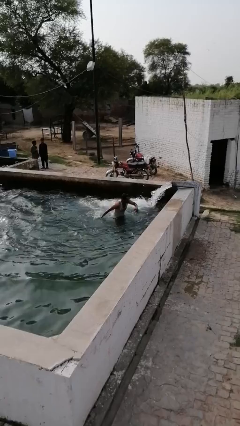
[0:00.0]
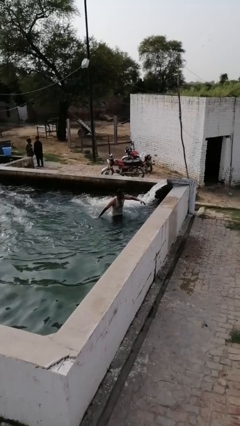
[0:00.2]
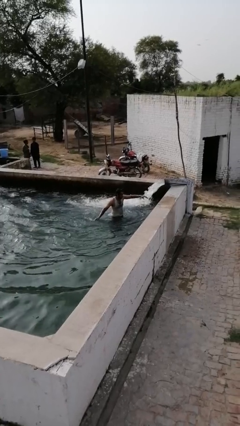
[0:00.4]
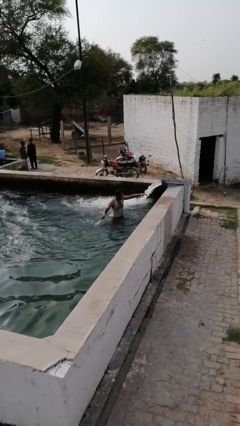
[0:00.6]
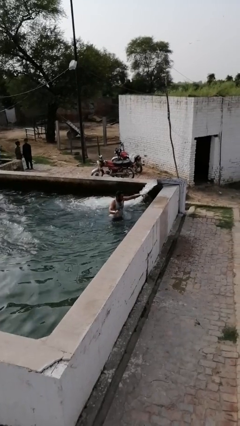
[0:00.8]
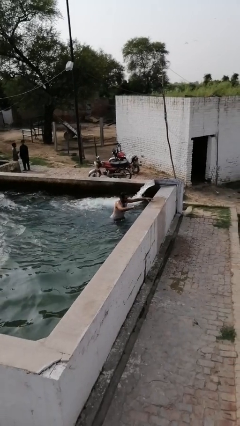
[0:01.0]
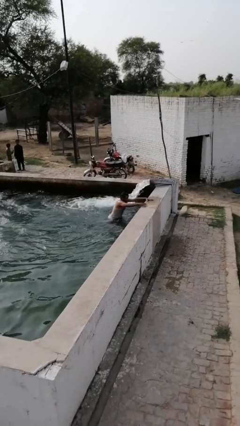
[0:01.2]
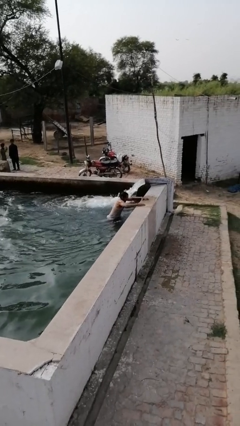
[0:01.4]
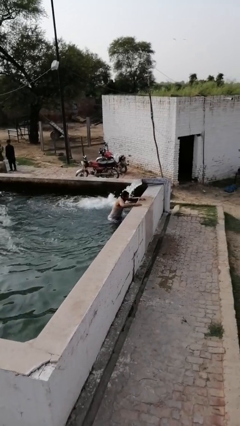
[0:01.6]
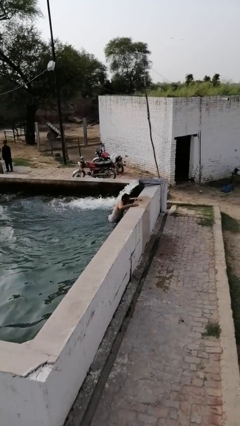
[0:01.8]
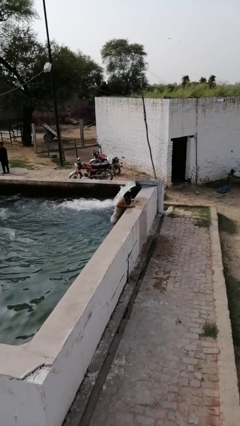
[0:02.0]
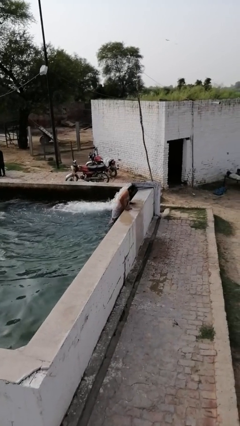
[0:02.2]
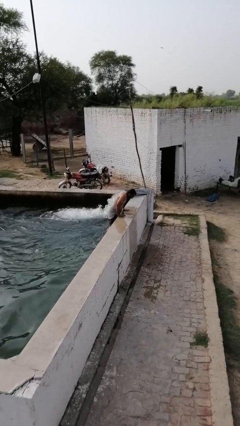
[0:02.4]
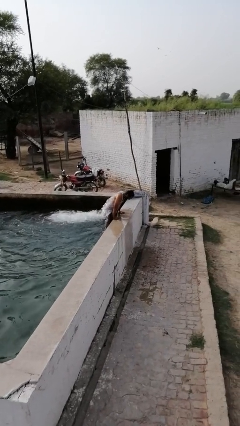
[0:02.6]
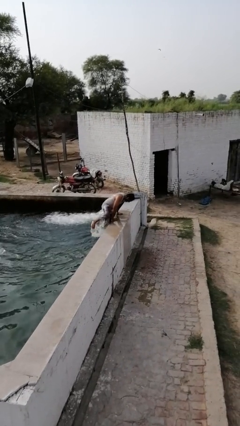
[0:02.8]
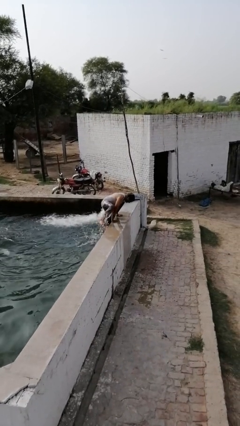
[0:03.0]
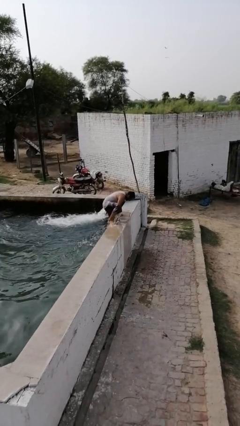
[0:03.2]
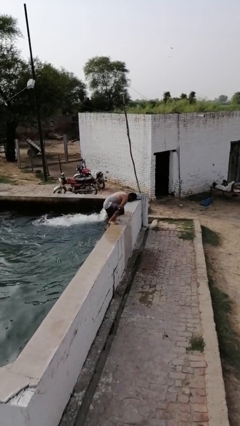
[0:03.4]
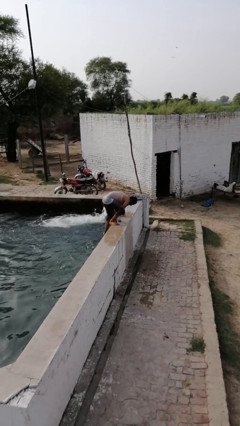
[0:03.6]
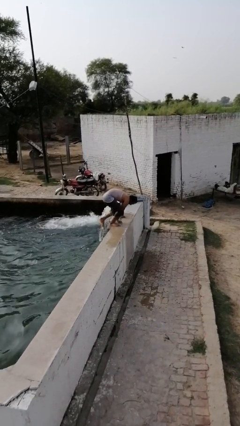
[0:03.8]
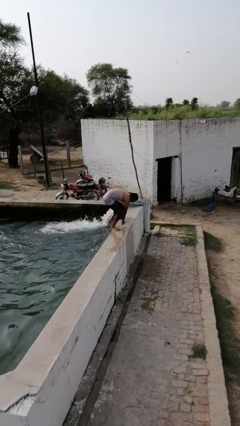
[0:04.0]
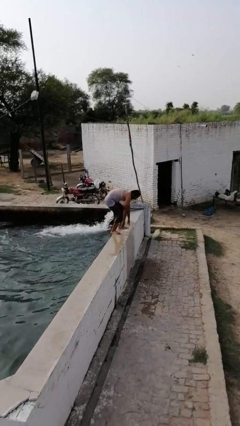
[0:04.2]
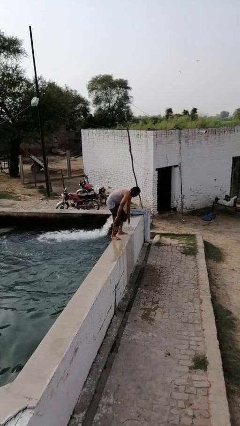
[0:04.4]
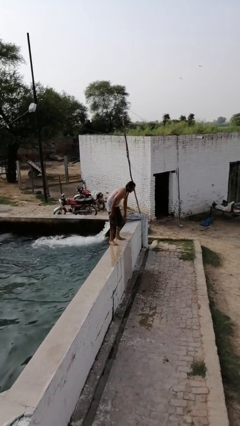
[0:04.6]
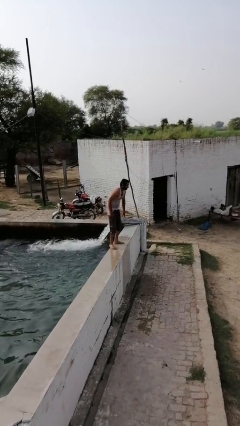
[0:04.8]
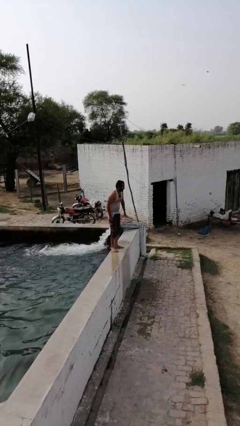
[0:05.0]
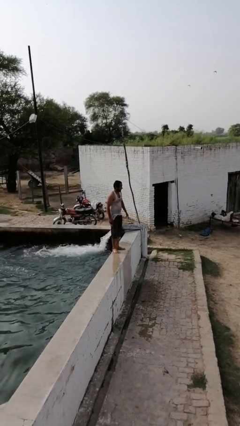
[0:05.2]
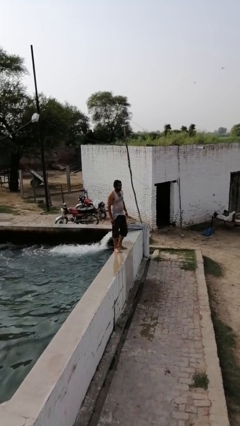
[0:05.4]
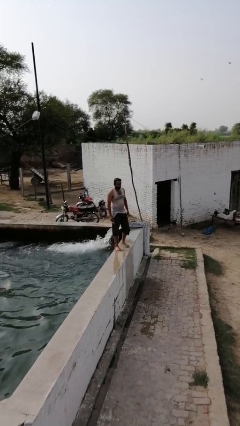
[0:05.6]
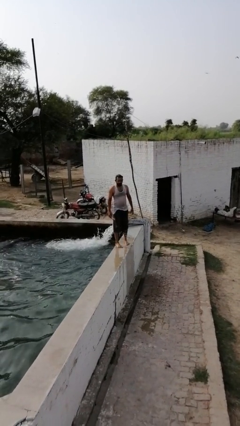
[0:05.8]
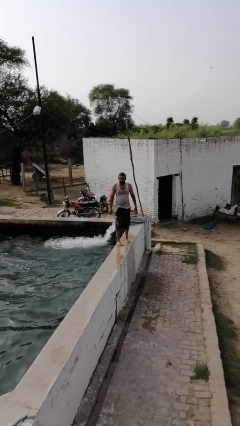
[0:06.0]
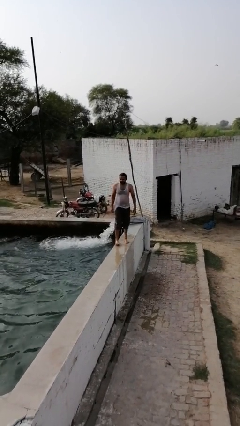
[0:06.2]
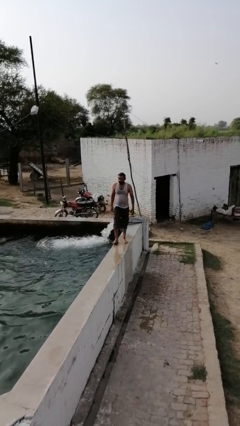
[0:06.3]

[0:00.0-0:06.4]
person exits pool

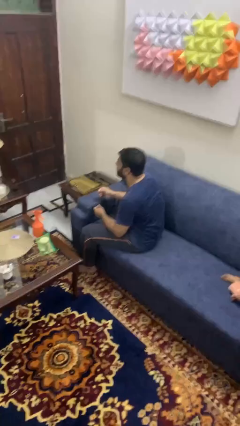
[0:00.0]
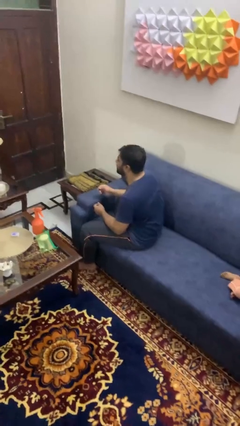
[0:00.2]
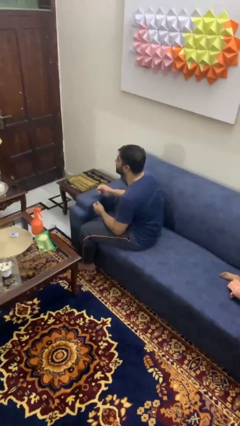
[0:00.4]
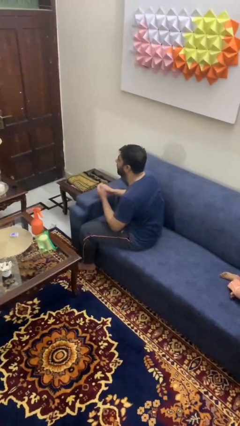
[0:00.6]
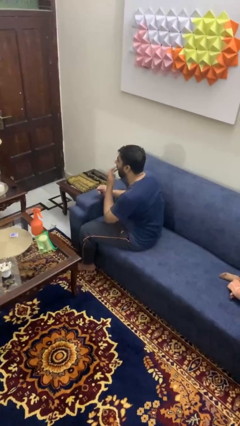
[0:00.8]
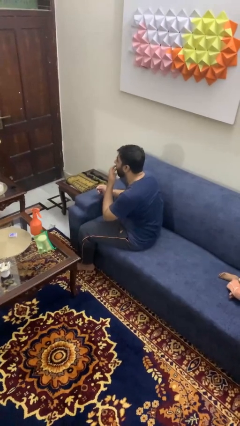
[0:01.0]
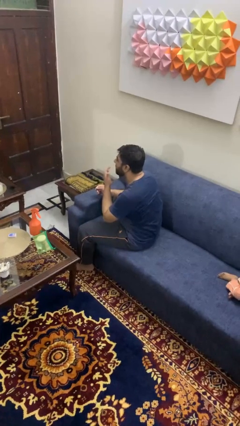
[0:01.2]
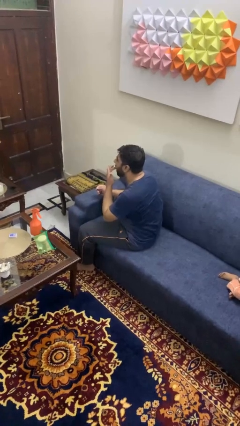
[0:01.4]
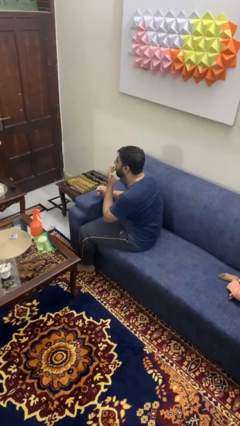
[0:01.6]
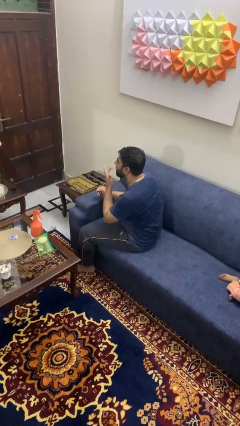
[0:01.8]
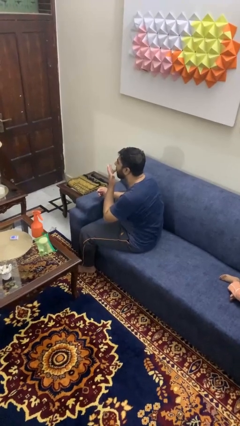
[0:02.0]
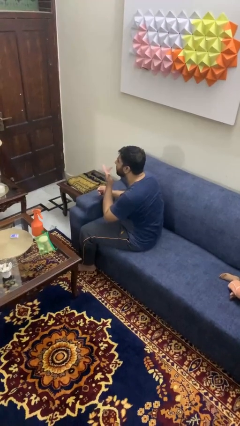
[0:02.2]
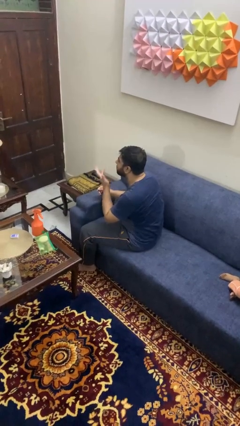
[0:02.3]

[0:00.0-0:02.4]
person licks fingers

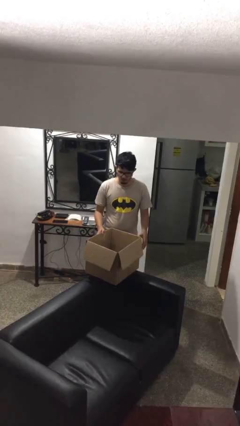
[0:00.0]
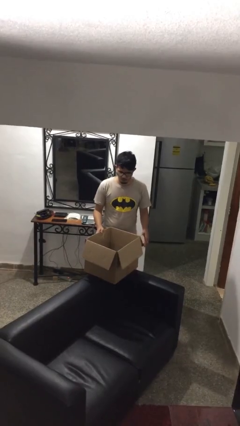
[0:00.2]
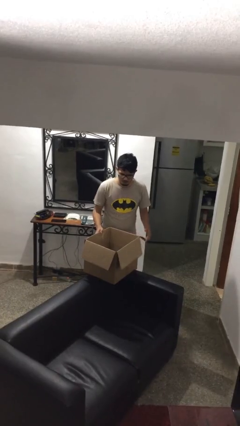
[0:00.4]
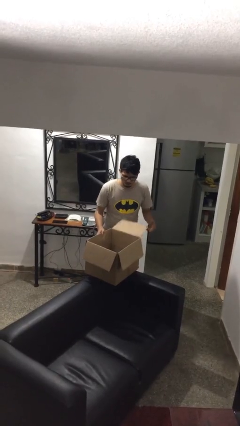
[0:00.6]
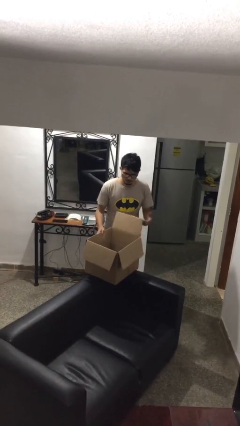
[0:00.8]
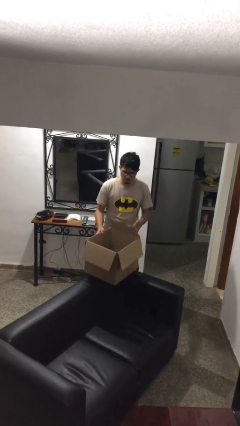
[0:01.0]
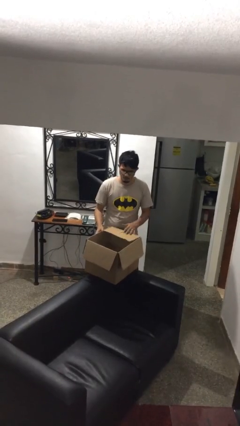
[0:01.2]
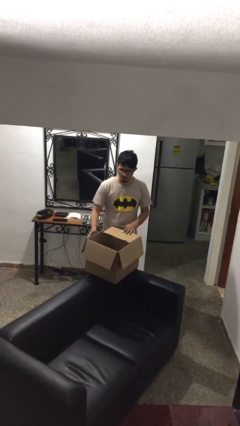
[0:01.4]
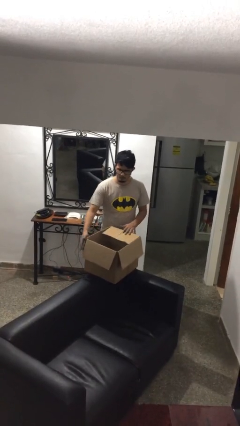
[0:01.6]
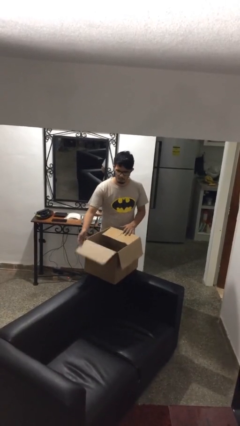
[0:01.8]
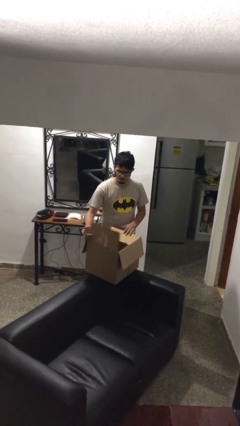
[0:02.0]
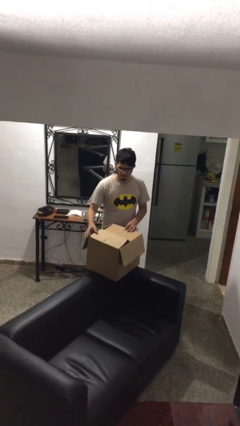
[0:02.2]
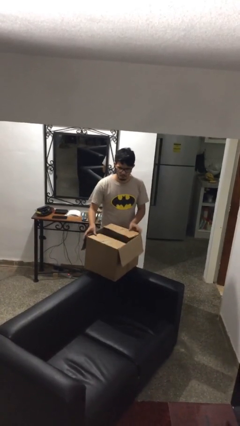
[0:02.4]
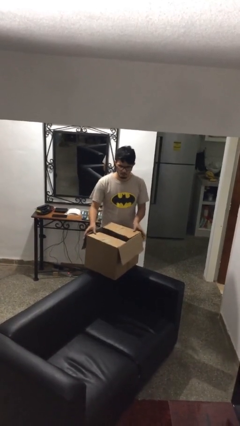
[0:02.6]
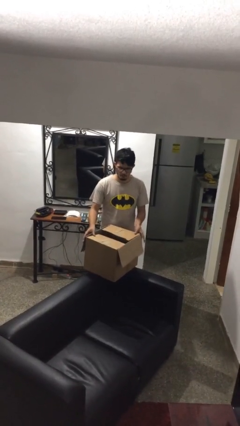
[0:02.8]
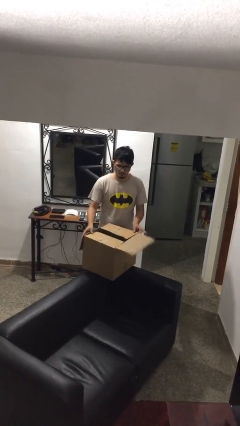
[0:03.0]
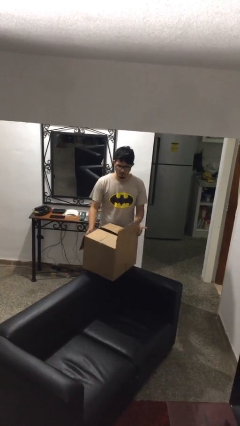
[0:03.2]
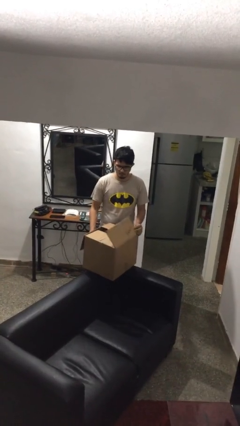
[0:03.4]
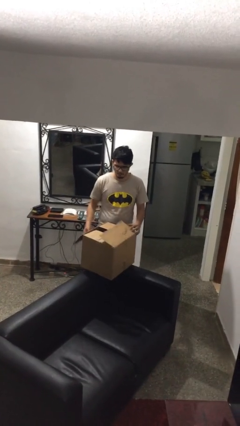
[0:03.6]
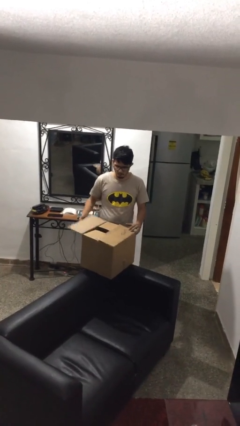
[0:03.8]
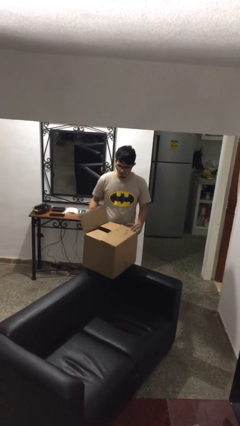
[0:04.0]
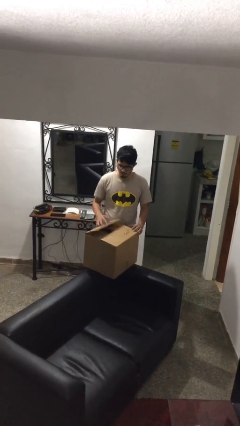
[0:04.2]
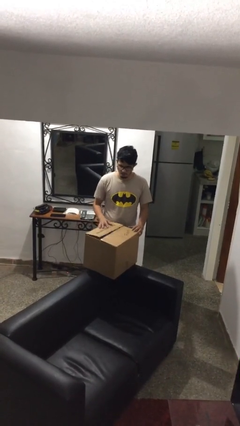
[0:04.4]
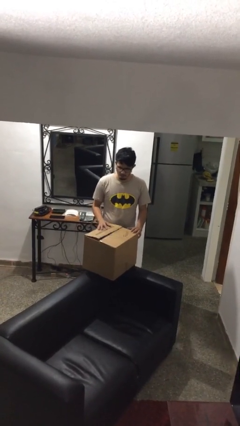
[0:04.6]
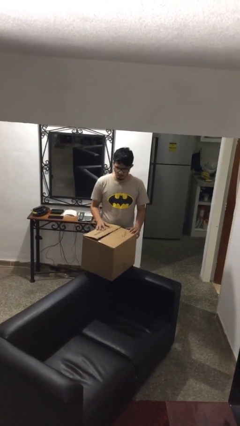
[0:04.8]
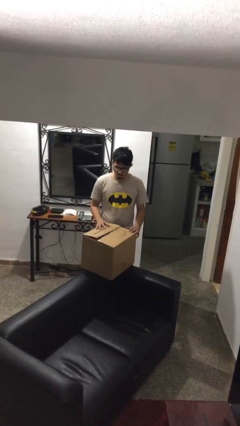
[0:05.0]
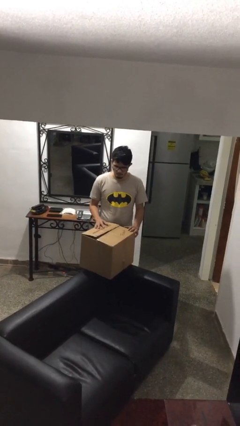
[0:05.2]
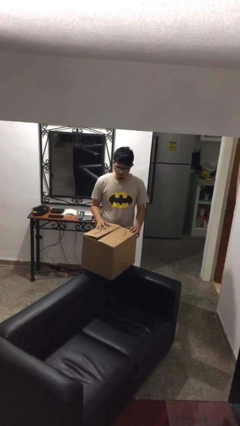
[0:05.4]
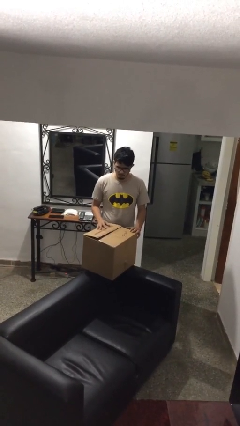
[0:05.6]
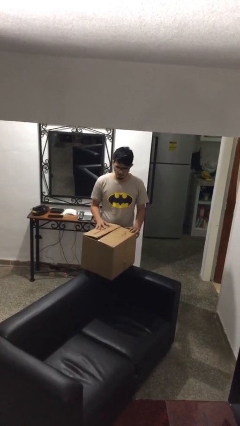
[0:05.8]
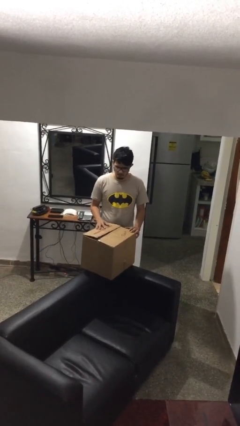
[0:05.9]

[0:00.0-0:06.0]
person closes box

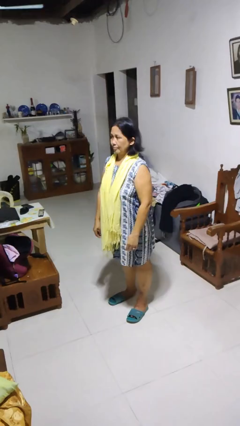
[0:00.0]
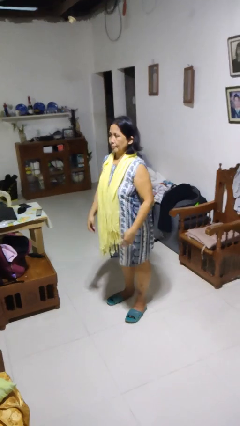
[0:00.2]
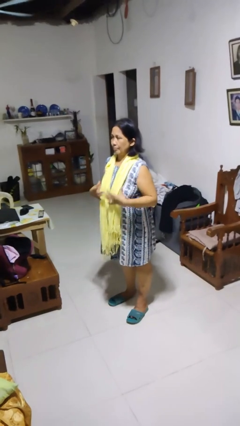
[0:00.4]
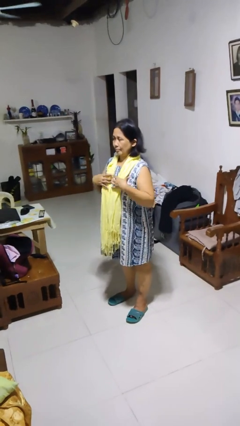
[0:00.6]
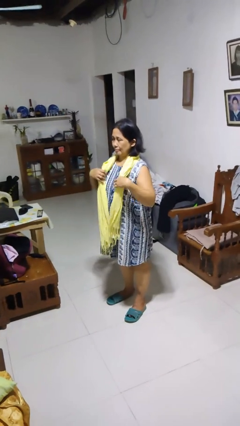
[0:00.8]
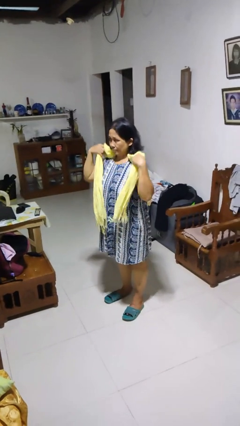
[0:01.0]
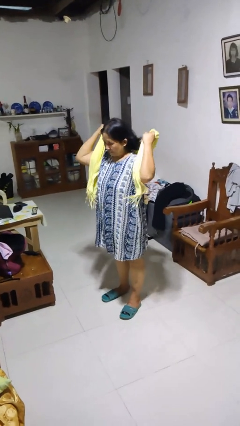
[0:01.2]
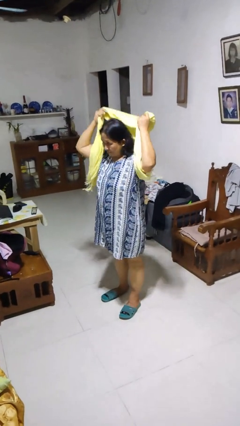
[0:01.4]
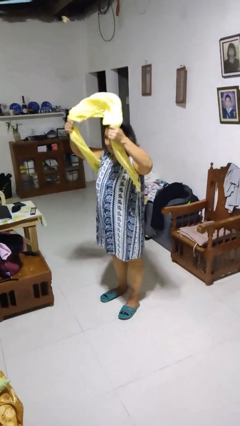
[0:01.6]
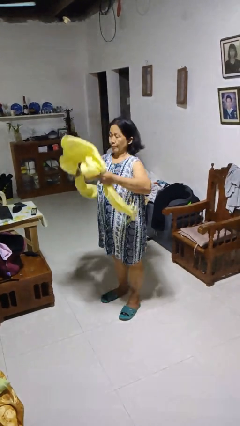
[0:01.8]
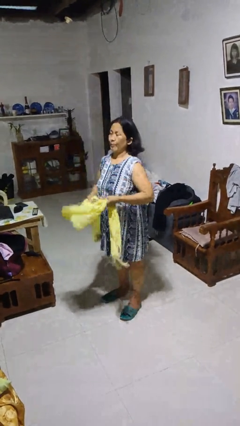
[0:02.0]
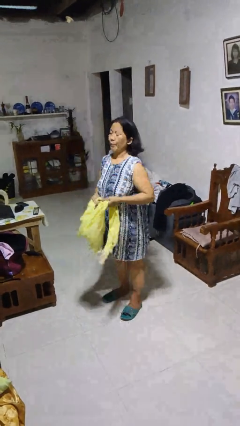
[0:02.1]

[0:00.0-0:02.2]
person takes off scarf

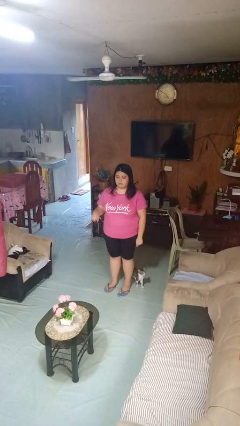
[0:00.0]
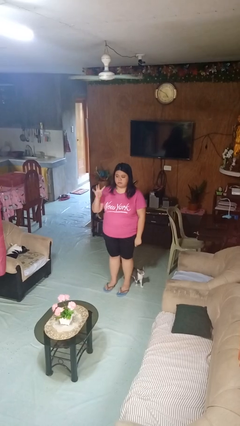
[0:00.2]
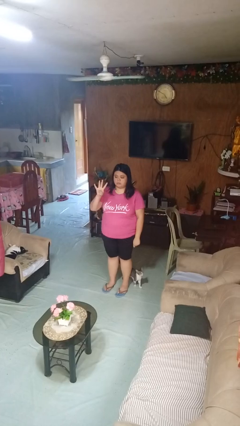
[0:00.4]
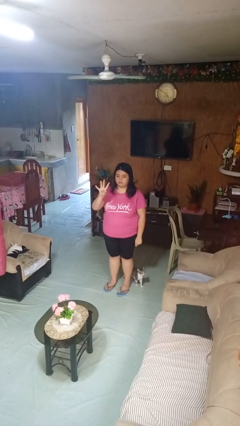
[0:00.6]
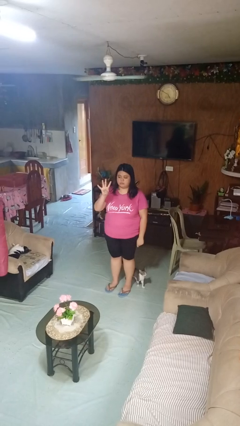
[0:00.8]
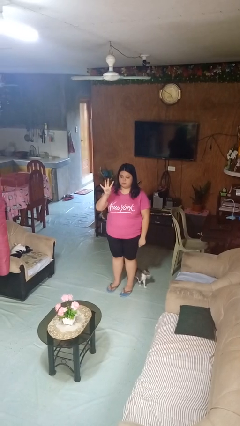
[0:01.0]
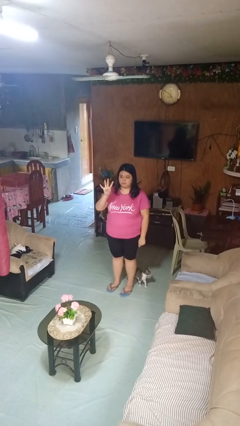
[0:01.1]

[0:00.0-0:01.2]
person gestures number four
